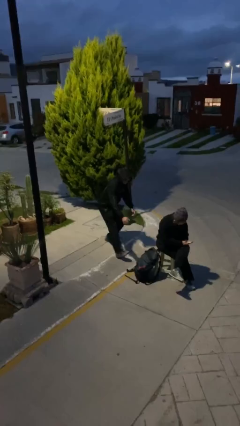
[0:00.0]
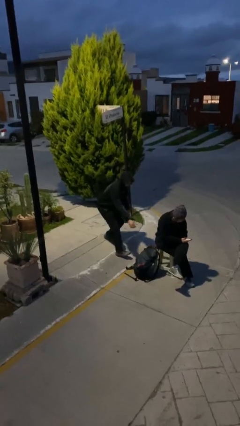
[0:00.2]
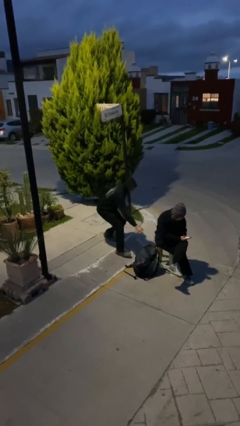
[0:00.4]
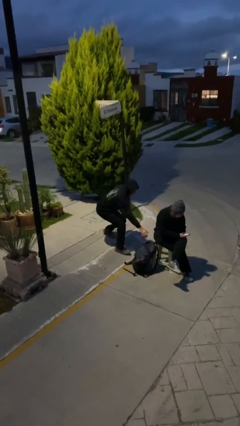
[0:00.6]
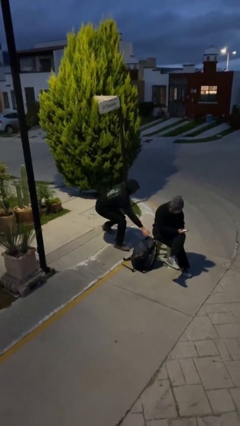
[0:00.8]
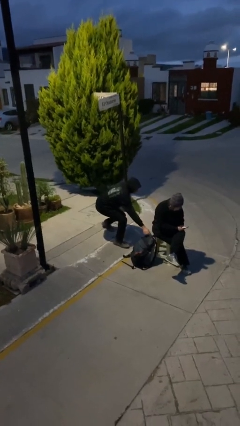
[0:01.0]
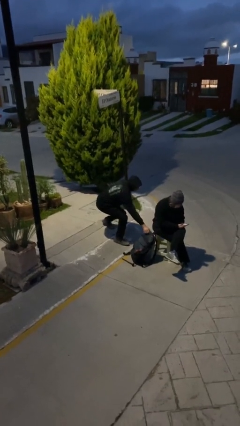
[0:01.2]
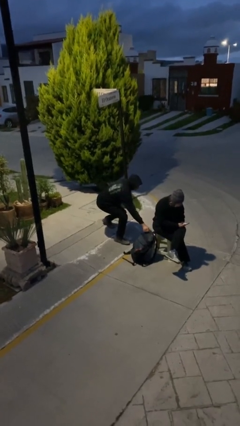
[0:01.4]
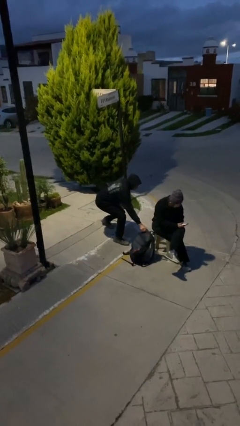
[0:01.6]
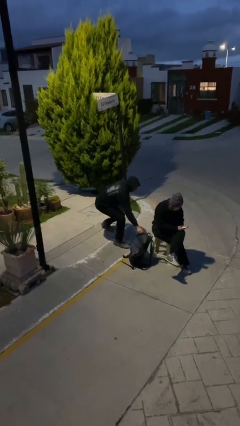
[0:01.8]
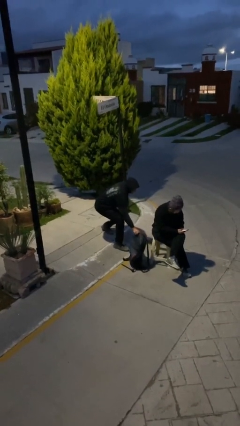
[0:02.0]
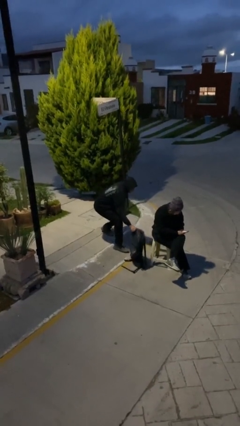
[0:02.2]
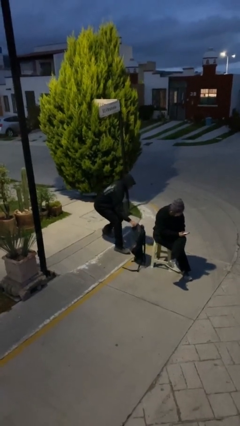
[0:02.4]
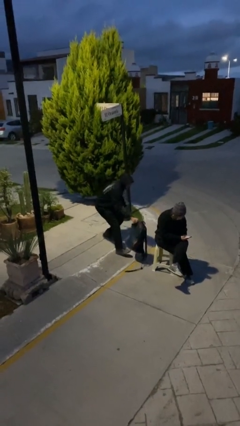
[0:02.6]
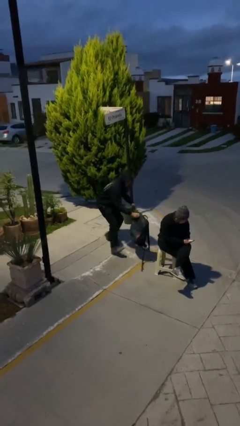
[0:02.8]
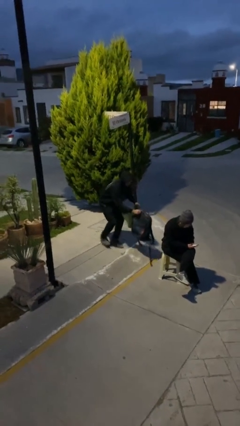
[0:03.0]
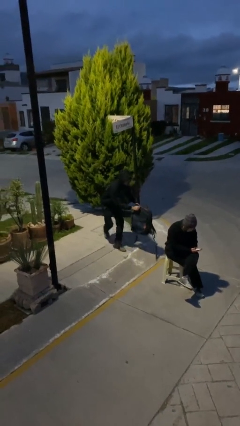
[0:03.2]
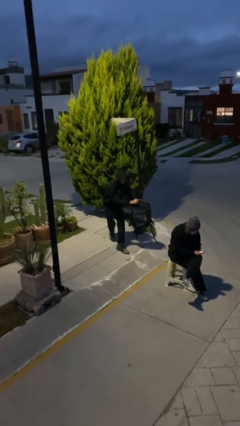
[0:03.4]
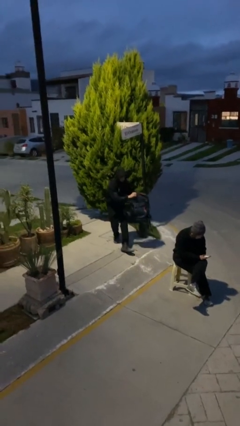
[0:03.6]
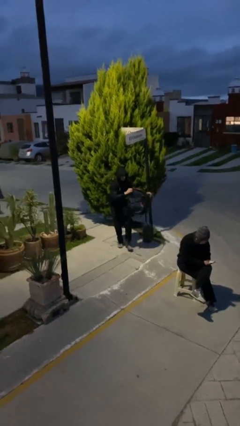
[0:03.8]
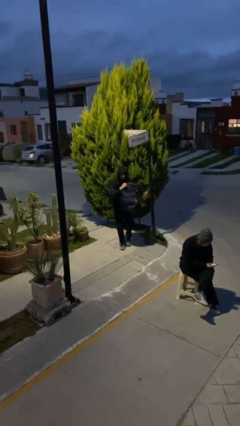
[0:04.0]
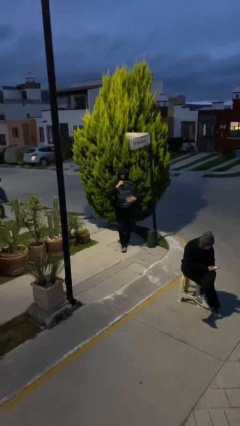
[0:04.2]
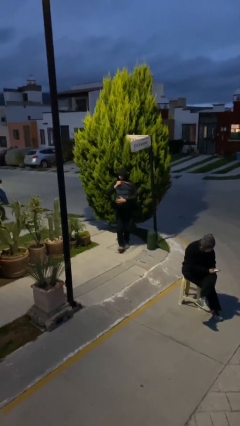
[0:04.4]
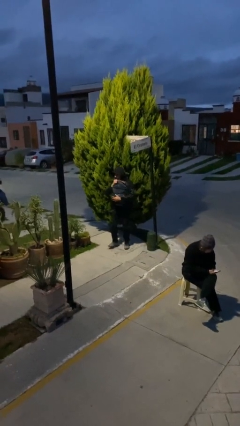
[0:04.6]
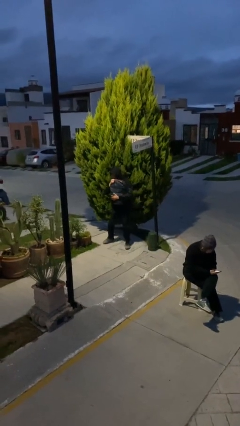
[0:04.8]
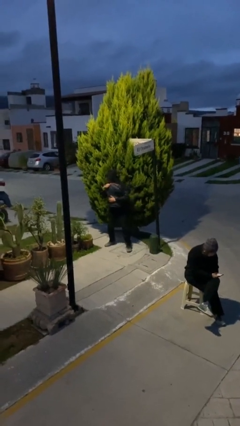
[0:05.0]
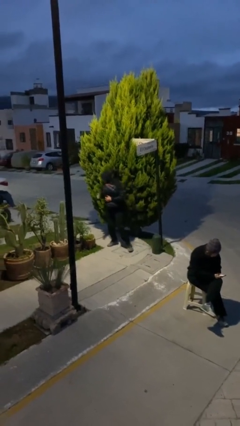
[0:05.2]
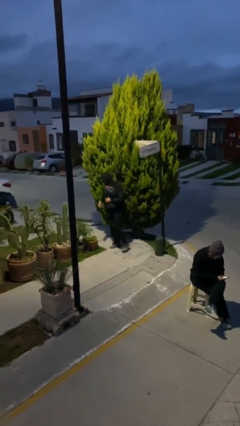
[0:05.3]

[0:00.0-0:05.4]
person steals object from person

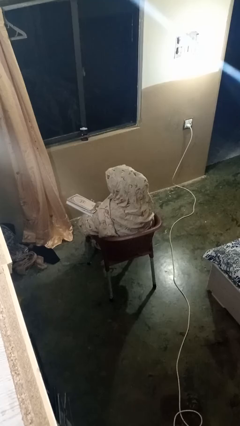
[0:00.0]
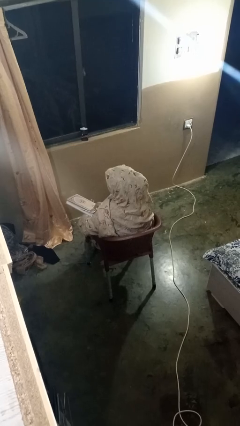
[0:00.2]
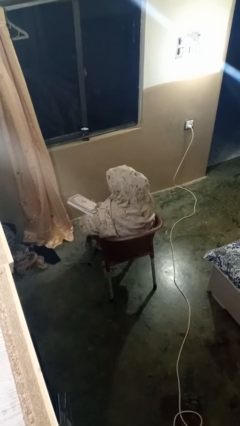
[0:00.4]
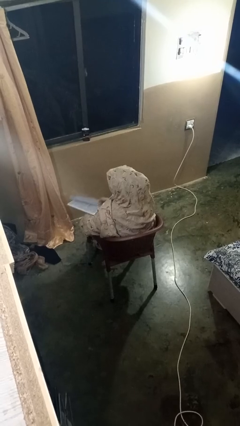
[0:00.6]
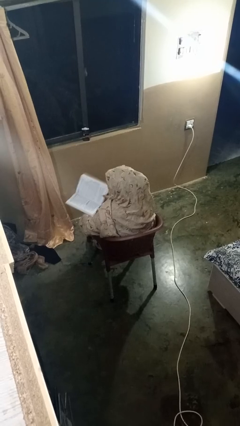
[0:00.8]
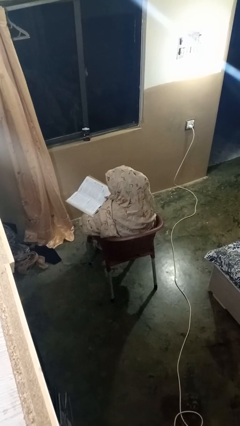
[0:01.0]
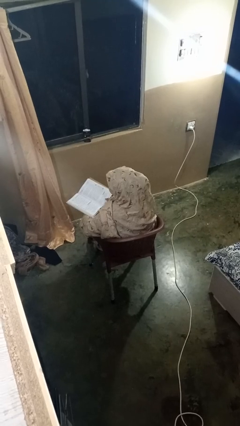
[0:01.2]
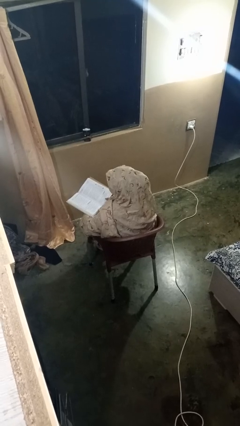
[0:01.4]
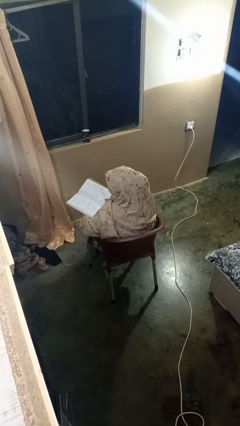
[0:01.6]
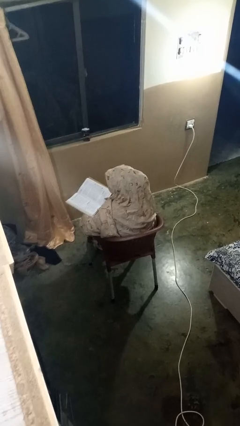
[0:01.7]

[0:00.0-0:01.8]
person reads book

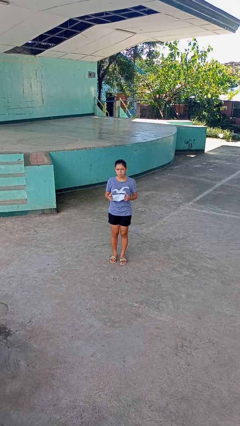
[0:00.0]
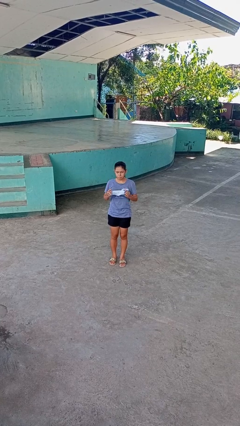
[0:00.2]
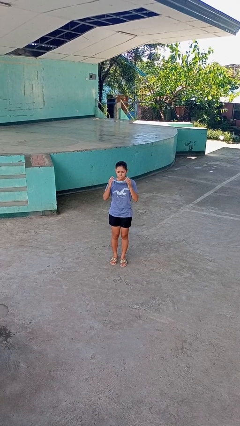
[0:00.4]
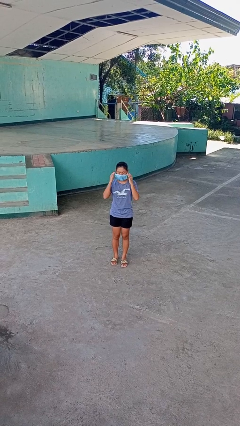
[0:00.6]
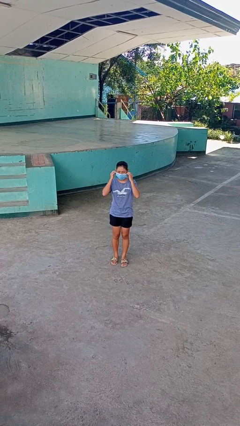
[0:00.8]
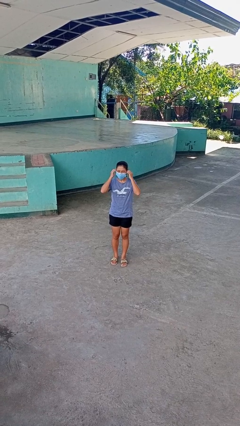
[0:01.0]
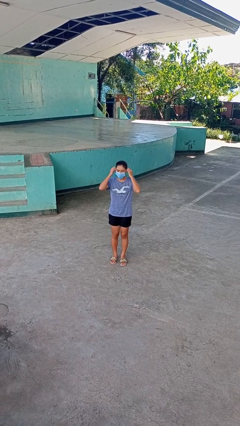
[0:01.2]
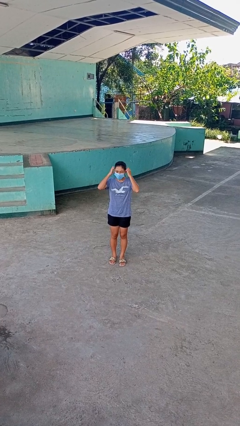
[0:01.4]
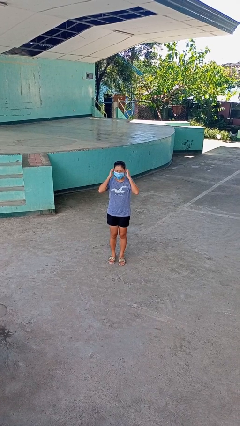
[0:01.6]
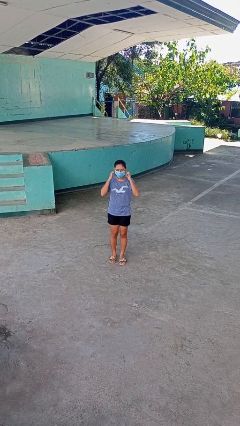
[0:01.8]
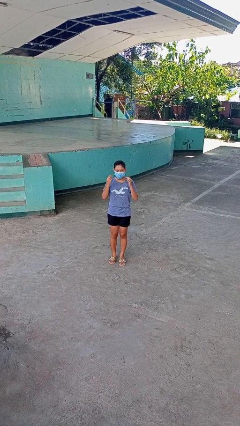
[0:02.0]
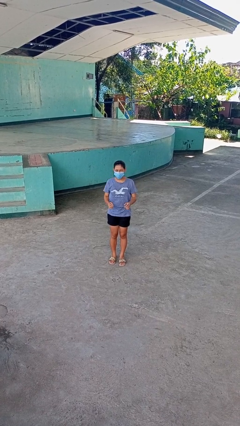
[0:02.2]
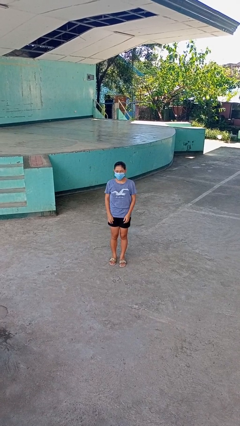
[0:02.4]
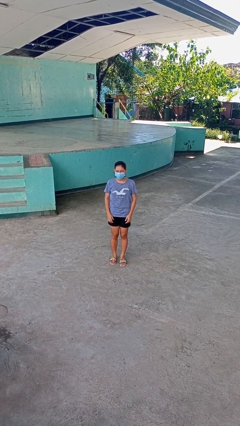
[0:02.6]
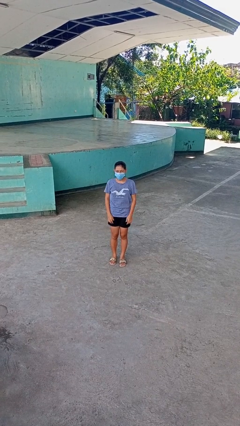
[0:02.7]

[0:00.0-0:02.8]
person puts on facemask

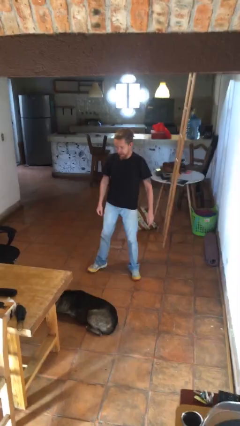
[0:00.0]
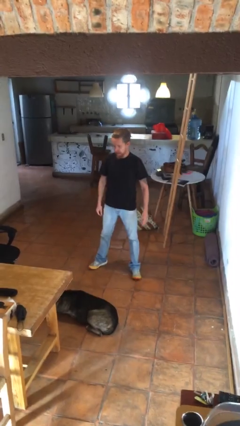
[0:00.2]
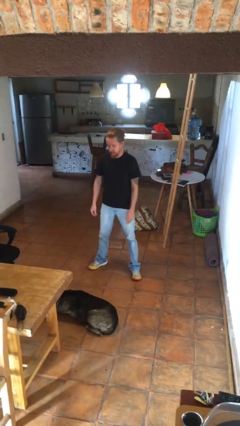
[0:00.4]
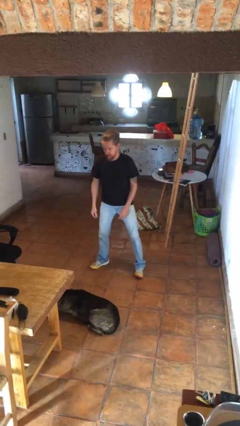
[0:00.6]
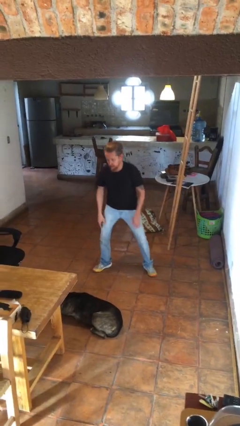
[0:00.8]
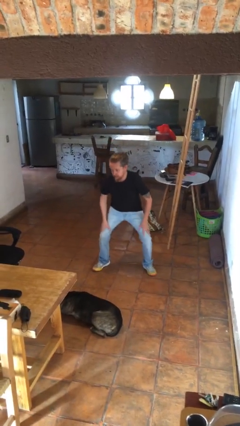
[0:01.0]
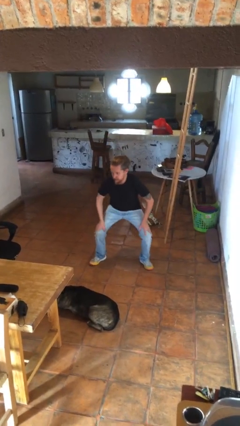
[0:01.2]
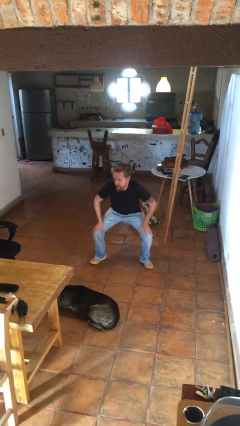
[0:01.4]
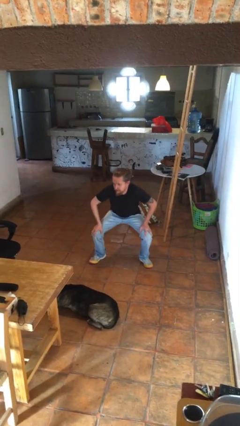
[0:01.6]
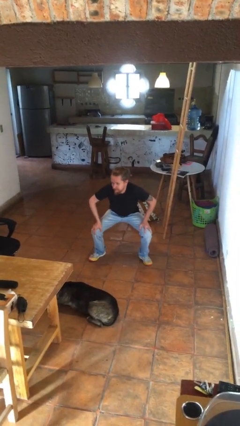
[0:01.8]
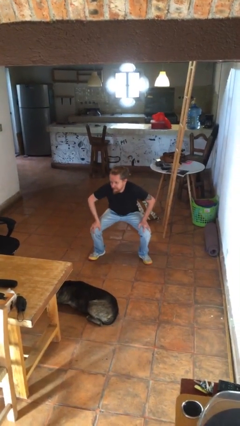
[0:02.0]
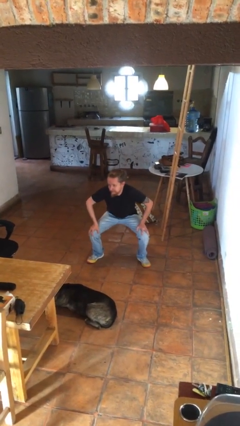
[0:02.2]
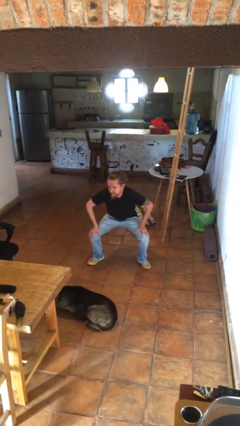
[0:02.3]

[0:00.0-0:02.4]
person squats

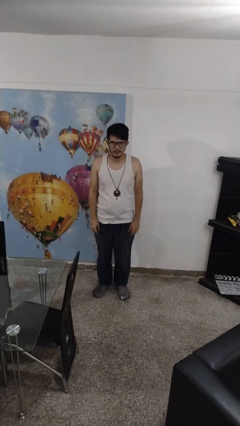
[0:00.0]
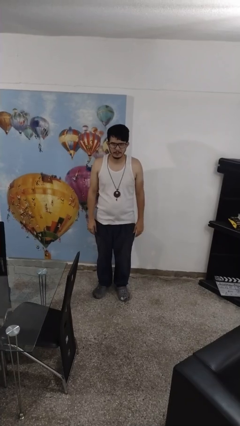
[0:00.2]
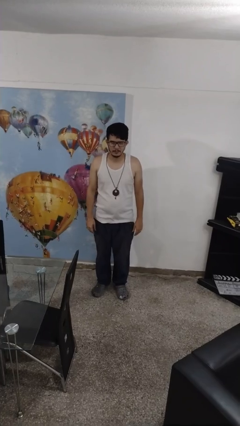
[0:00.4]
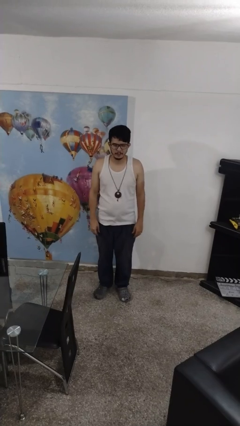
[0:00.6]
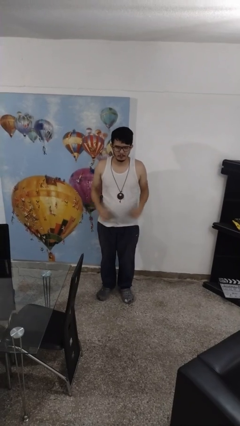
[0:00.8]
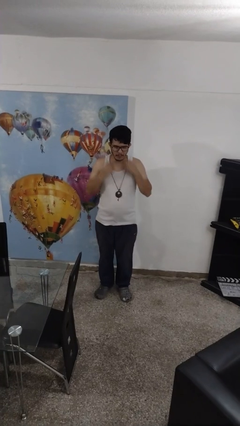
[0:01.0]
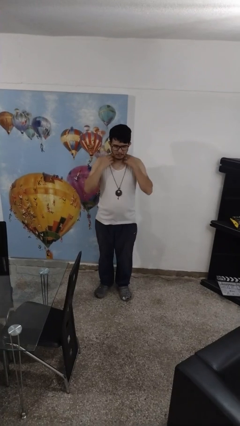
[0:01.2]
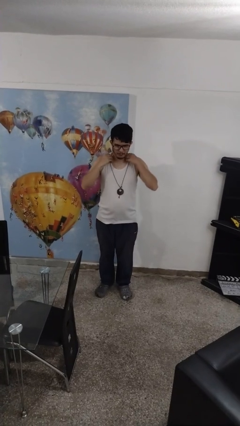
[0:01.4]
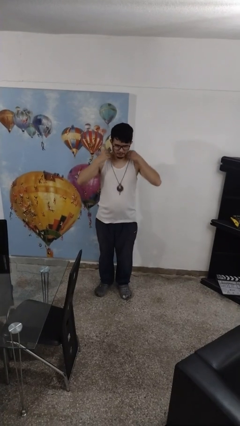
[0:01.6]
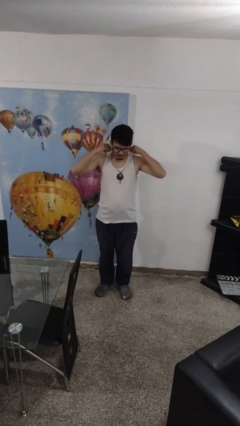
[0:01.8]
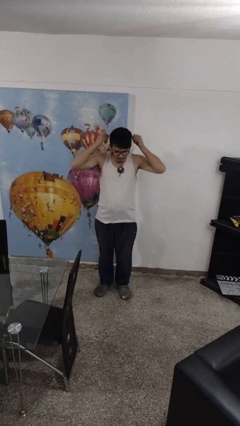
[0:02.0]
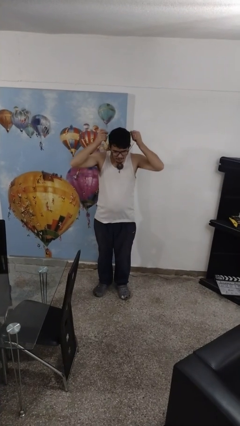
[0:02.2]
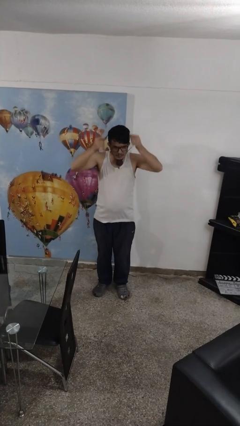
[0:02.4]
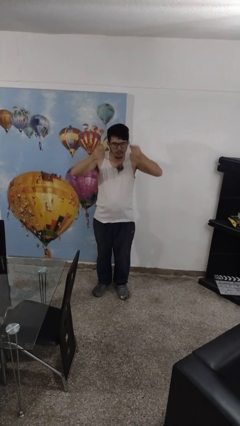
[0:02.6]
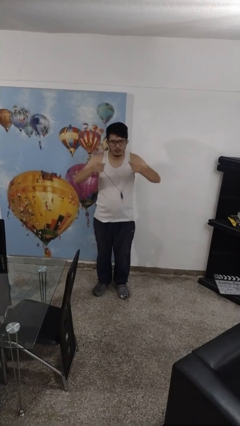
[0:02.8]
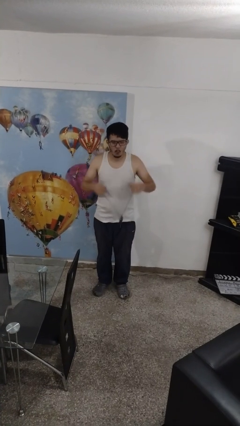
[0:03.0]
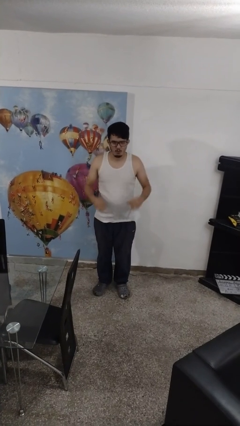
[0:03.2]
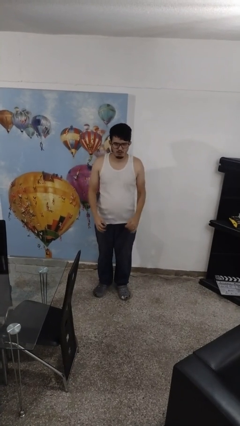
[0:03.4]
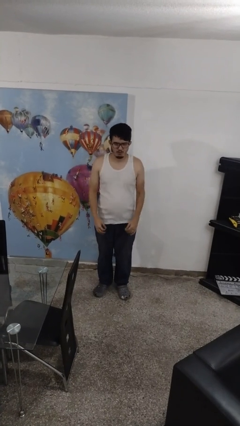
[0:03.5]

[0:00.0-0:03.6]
person takes off necklace

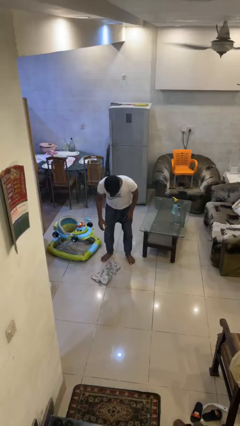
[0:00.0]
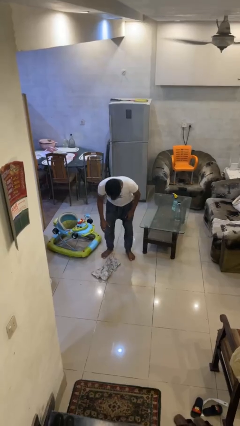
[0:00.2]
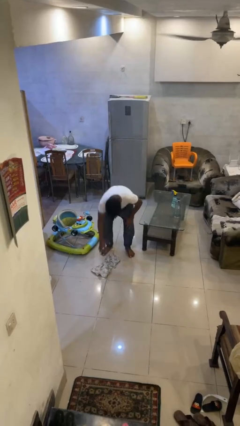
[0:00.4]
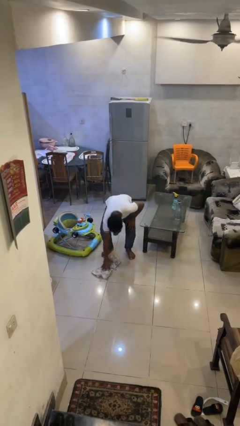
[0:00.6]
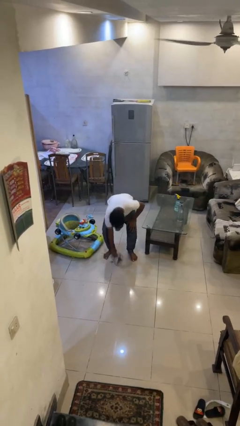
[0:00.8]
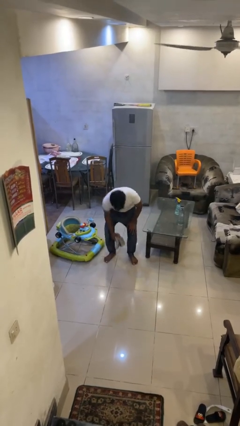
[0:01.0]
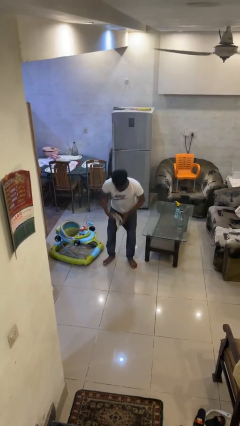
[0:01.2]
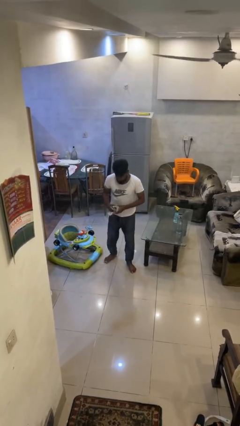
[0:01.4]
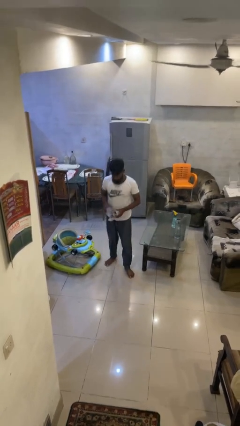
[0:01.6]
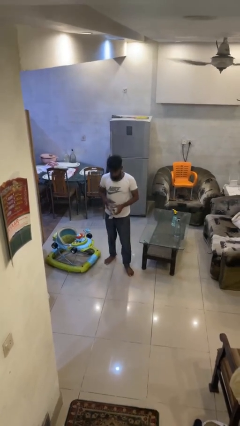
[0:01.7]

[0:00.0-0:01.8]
person picks up object from floor
